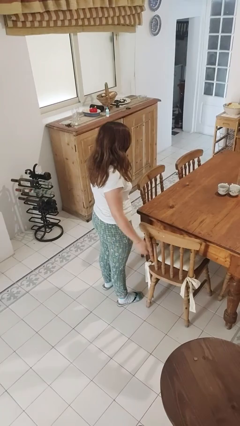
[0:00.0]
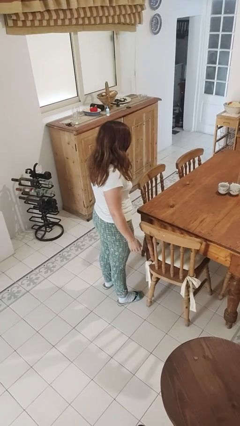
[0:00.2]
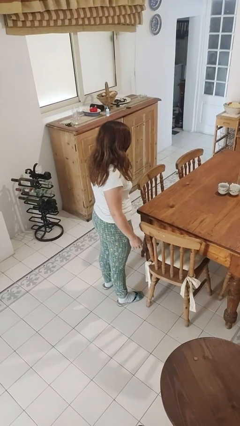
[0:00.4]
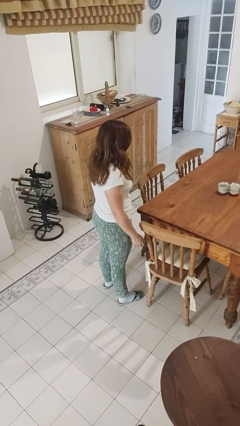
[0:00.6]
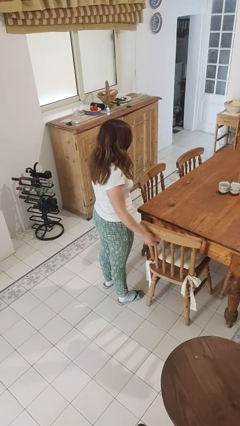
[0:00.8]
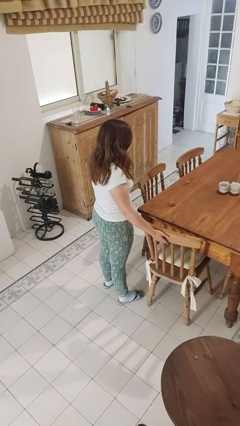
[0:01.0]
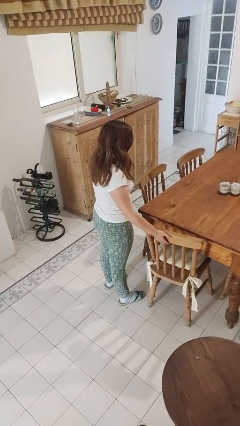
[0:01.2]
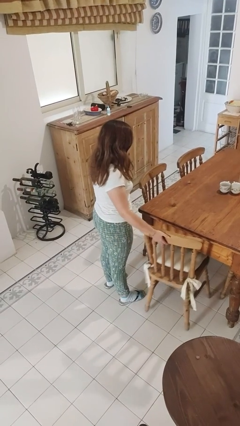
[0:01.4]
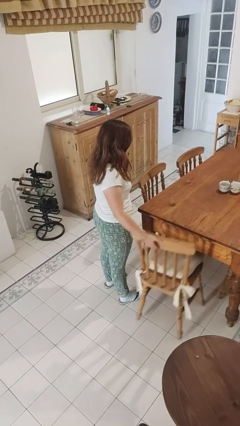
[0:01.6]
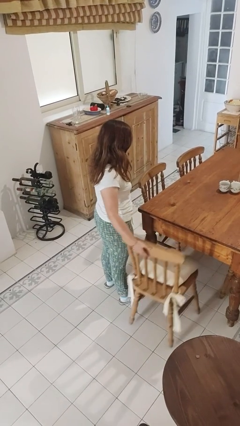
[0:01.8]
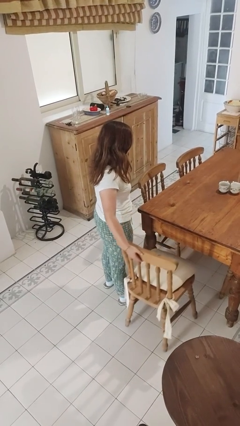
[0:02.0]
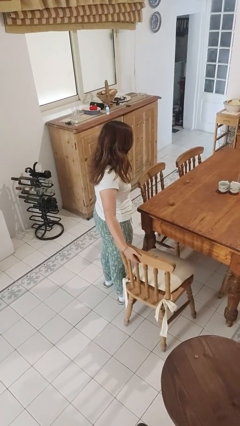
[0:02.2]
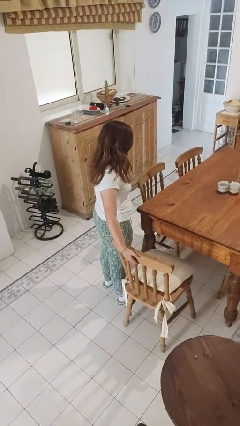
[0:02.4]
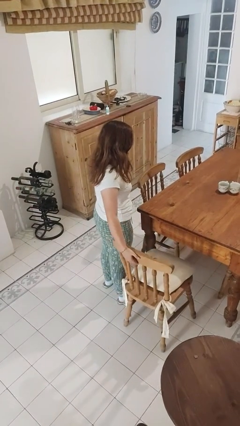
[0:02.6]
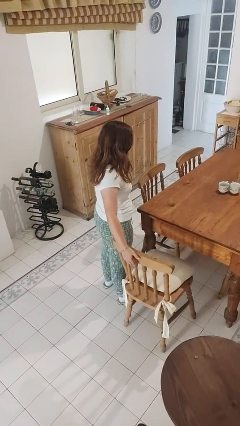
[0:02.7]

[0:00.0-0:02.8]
person pulls out chair

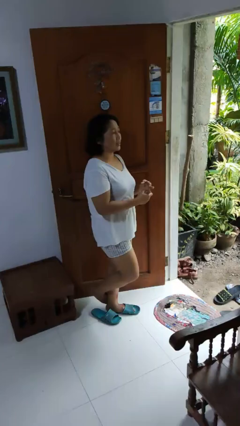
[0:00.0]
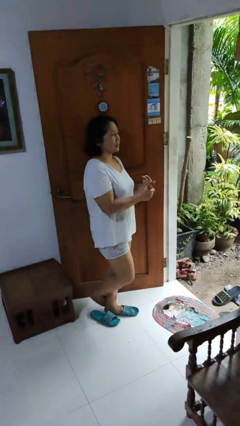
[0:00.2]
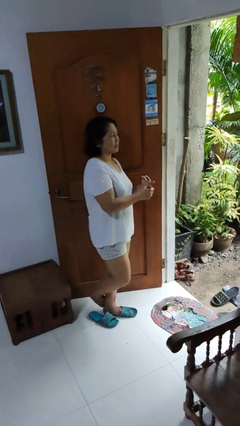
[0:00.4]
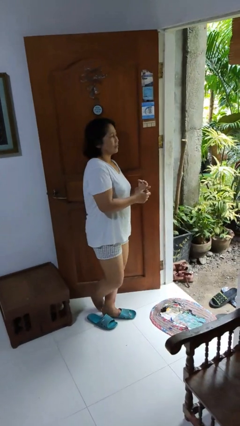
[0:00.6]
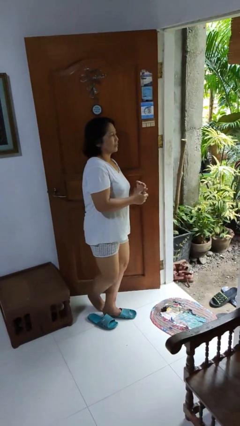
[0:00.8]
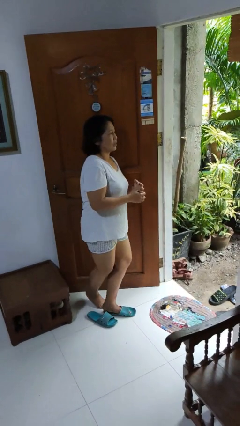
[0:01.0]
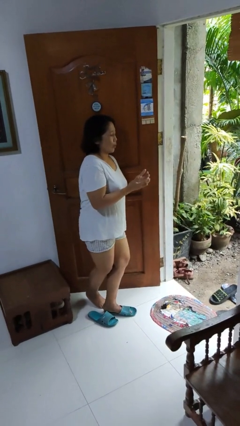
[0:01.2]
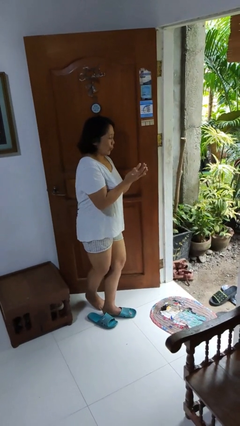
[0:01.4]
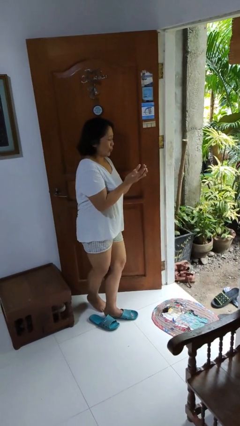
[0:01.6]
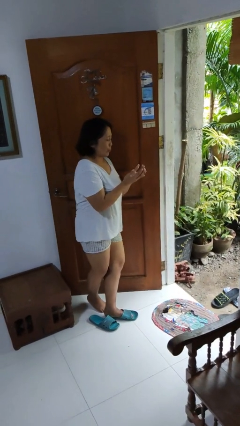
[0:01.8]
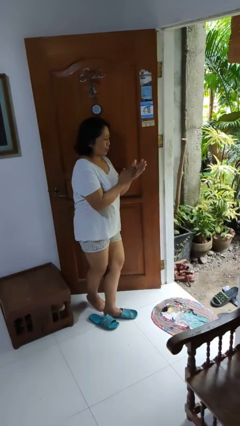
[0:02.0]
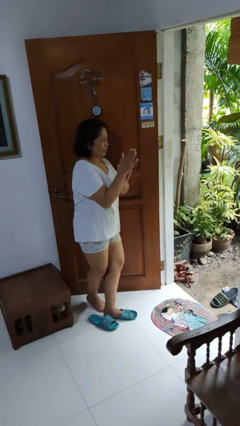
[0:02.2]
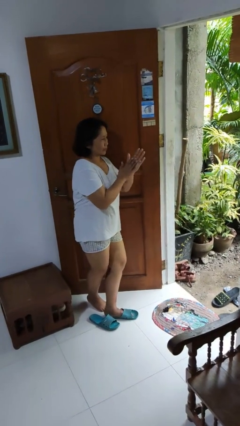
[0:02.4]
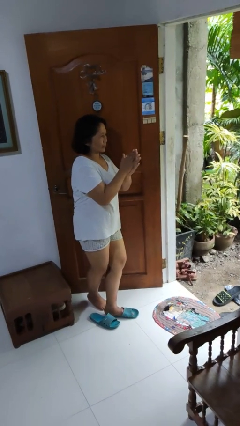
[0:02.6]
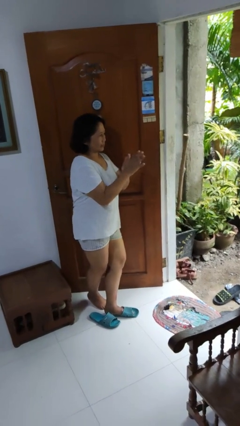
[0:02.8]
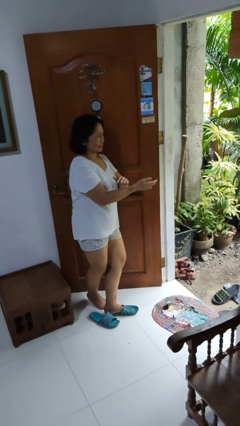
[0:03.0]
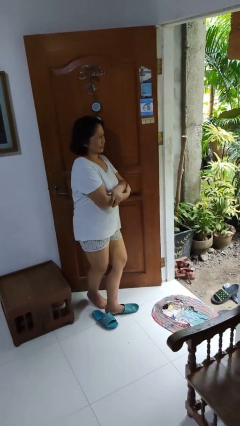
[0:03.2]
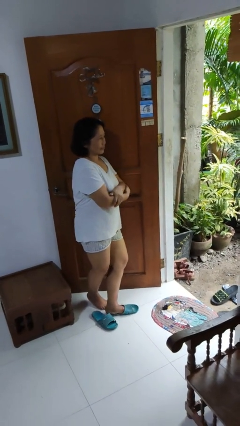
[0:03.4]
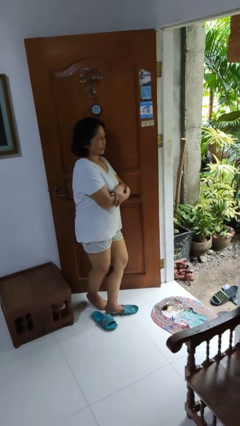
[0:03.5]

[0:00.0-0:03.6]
person blows into hands

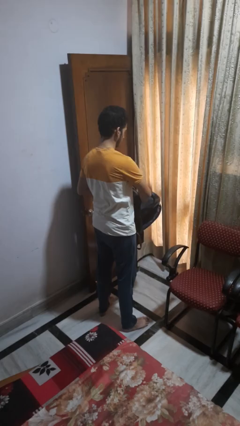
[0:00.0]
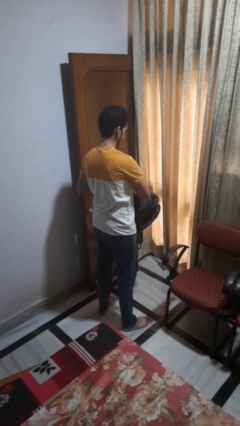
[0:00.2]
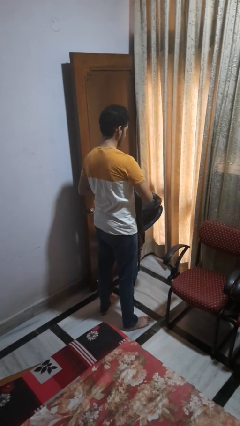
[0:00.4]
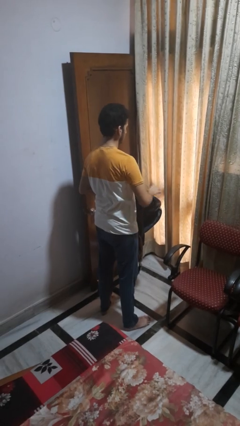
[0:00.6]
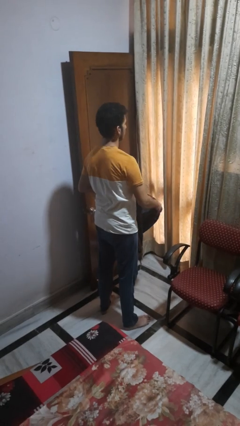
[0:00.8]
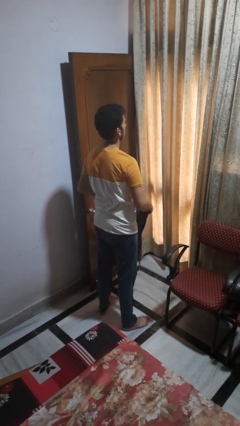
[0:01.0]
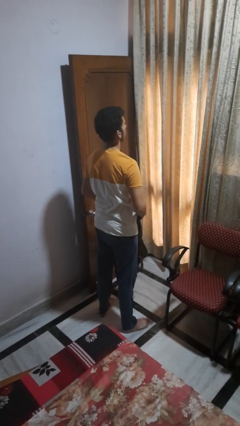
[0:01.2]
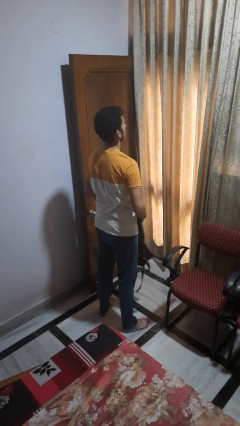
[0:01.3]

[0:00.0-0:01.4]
person puts object into backpack

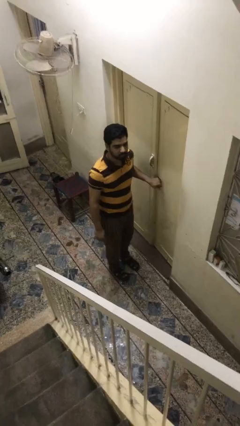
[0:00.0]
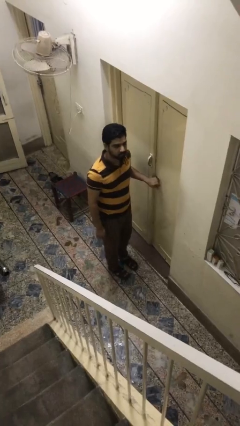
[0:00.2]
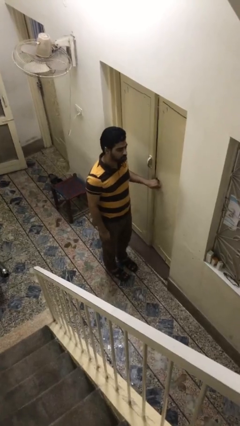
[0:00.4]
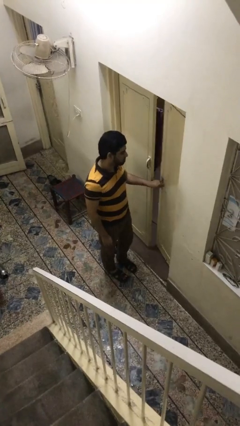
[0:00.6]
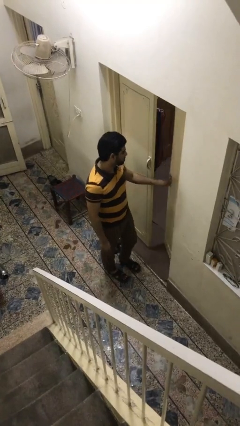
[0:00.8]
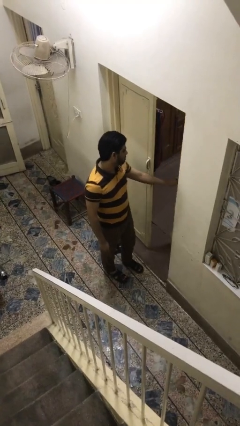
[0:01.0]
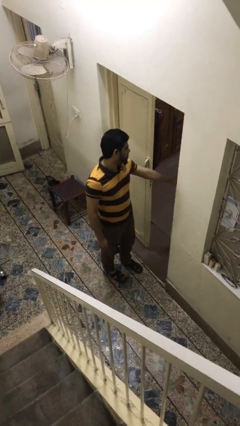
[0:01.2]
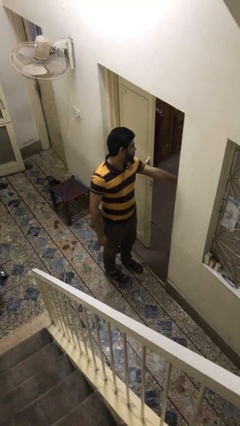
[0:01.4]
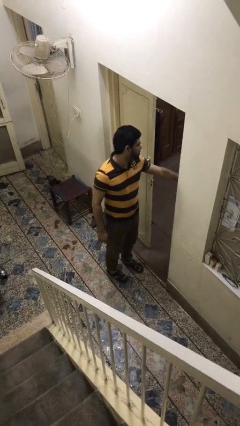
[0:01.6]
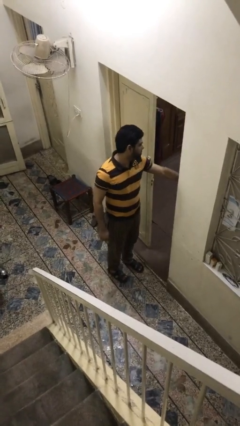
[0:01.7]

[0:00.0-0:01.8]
person opens facility door

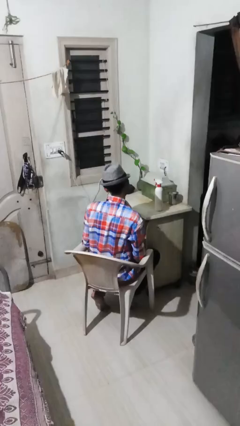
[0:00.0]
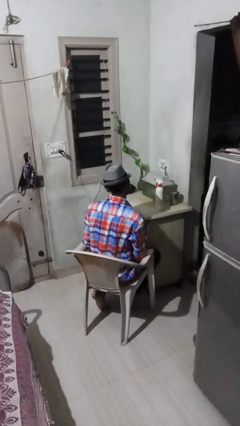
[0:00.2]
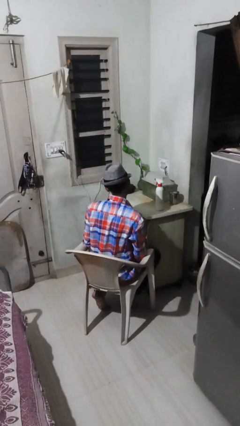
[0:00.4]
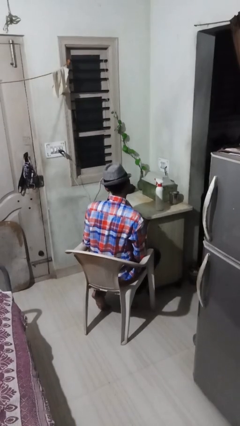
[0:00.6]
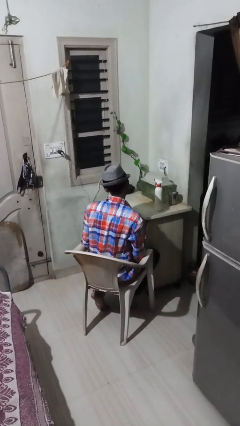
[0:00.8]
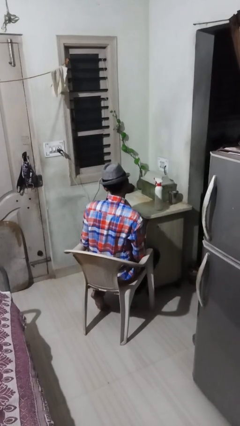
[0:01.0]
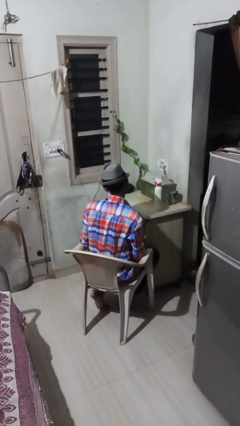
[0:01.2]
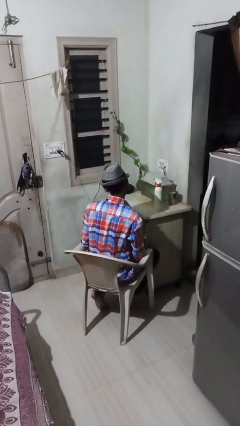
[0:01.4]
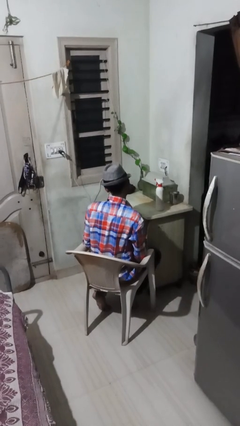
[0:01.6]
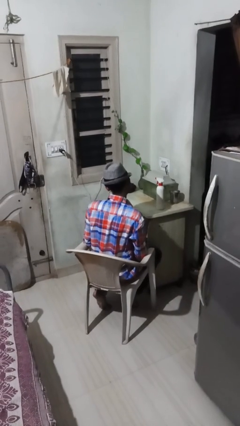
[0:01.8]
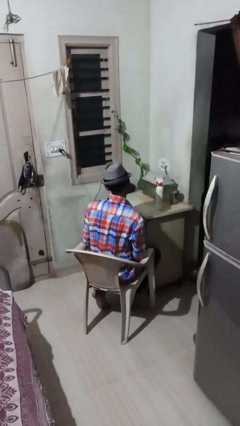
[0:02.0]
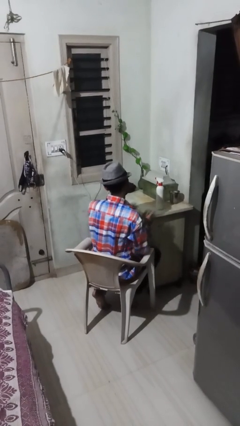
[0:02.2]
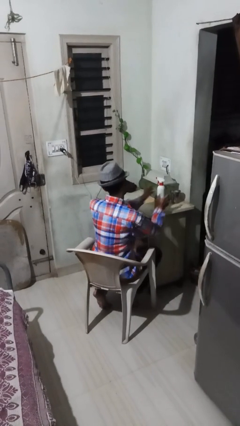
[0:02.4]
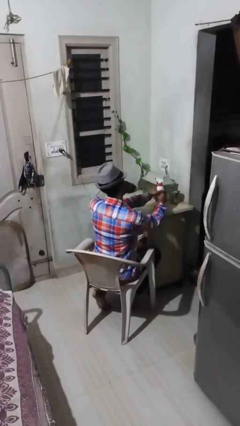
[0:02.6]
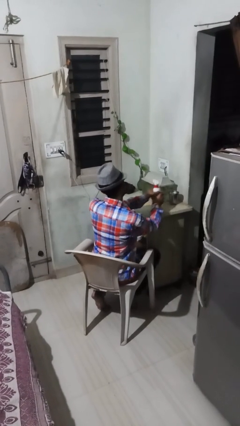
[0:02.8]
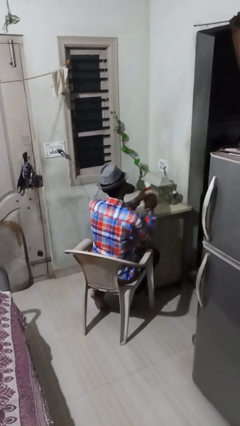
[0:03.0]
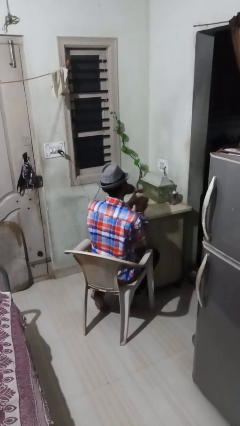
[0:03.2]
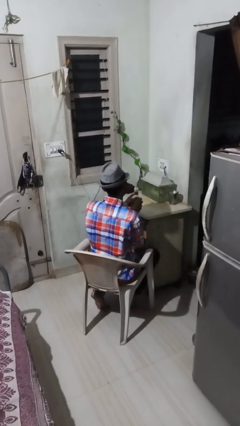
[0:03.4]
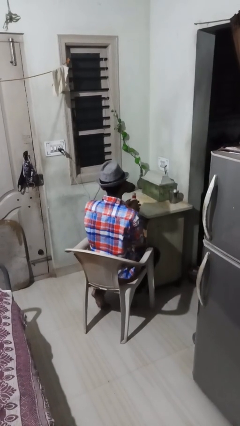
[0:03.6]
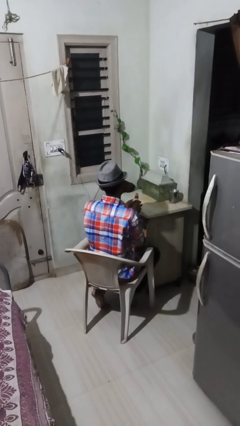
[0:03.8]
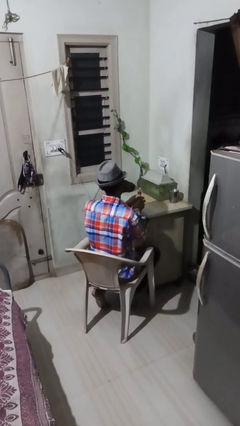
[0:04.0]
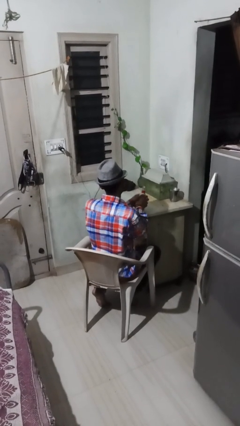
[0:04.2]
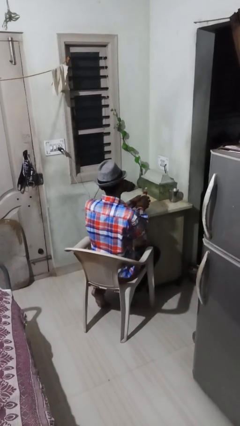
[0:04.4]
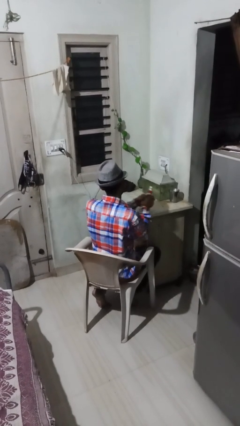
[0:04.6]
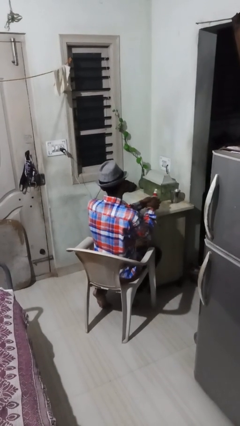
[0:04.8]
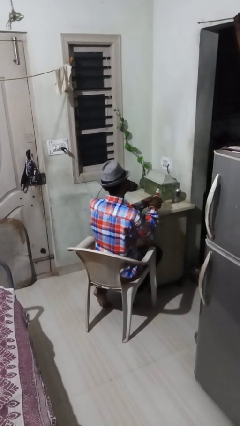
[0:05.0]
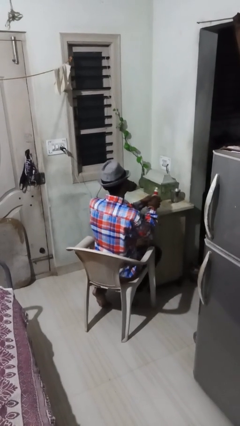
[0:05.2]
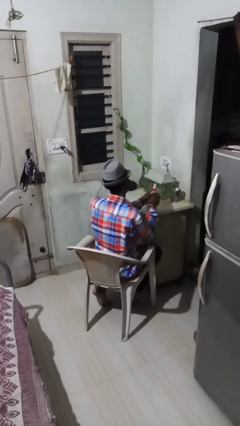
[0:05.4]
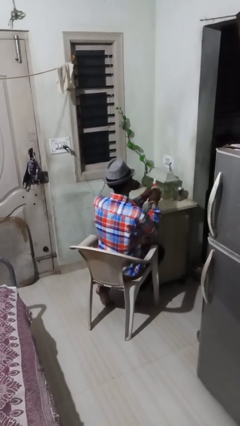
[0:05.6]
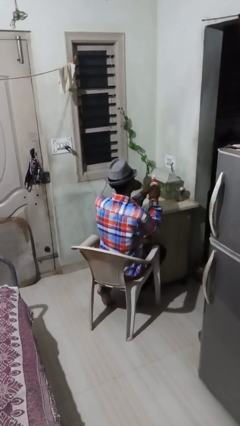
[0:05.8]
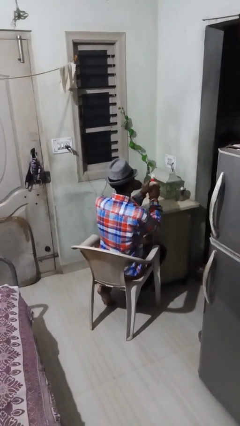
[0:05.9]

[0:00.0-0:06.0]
person sprays from bottle

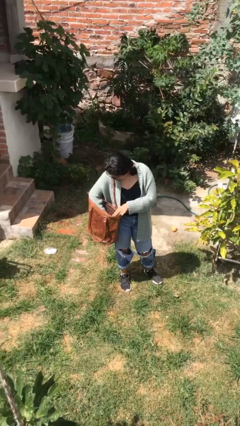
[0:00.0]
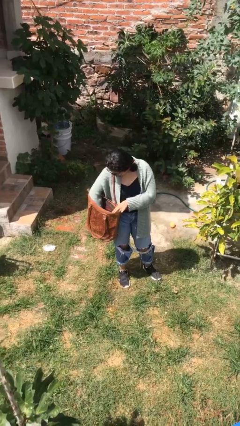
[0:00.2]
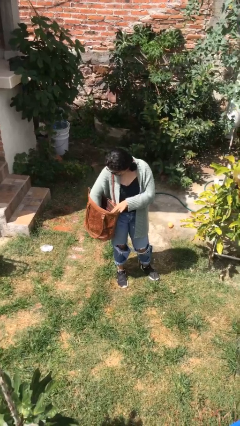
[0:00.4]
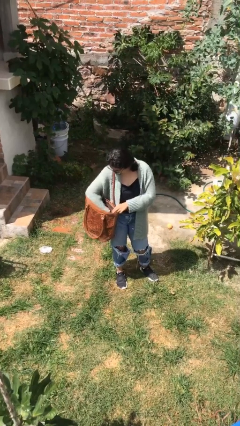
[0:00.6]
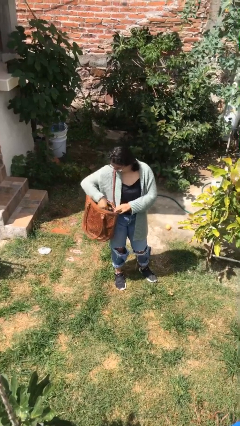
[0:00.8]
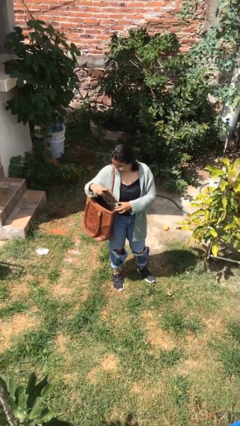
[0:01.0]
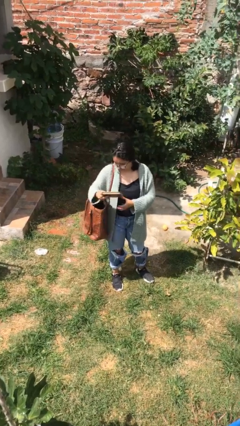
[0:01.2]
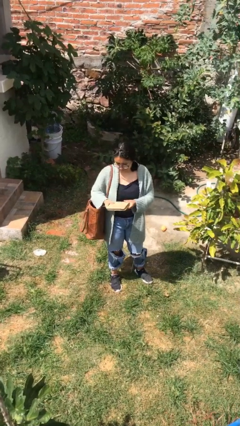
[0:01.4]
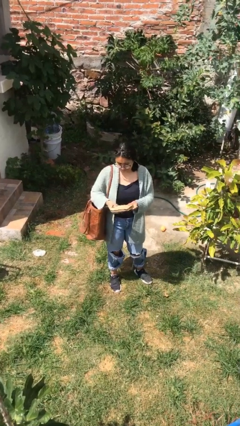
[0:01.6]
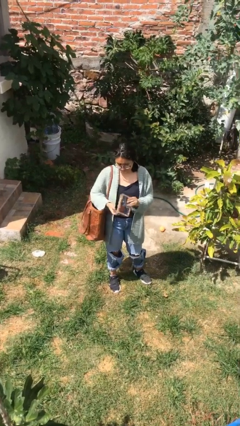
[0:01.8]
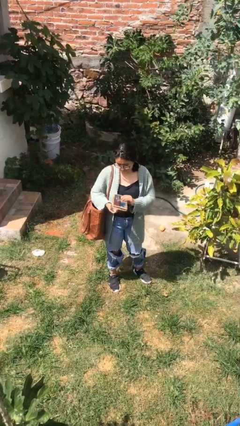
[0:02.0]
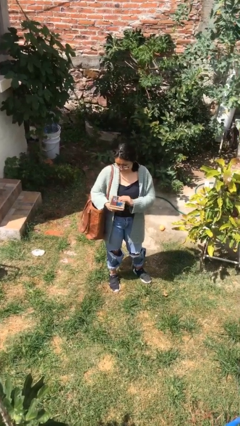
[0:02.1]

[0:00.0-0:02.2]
person takes object from purse
